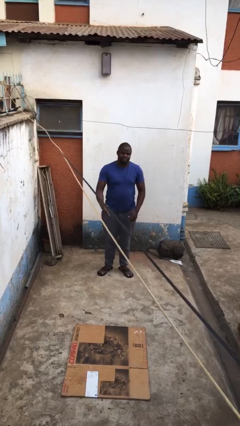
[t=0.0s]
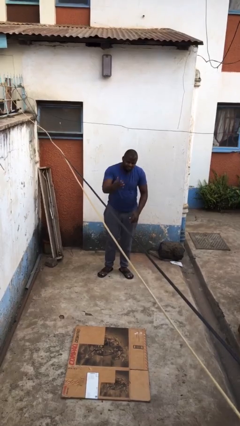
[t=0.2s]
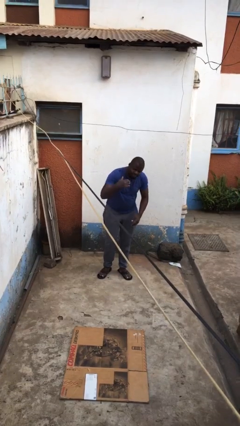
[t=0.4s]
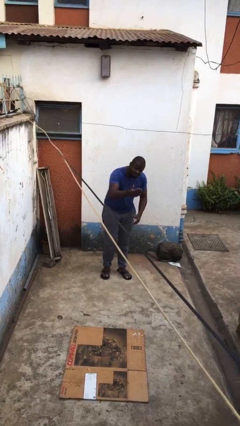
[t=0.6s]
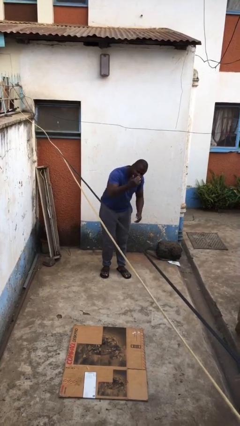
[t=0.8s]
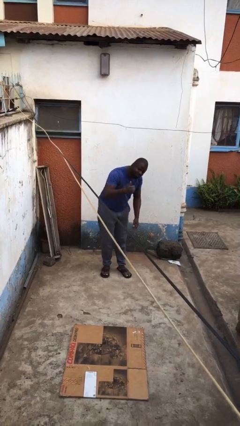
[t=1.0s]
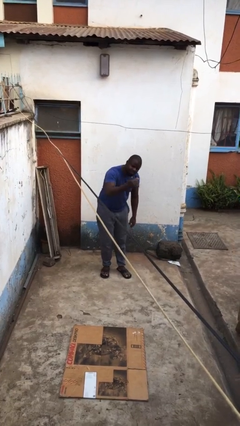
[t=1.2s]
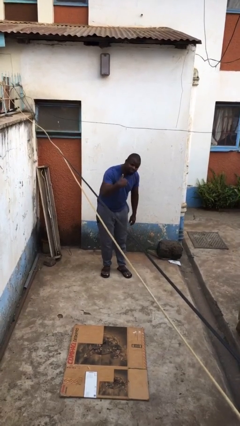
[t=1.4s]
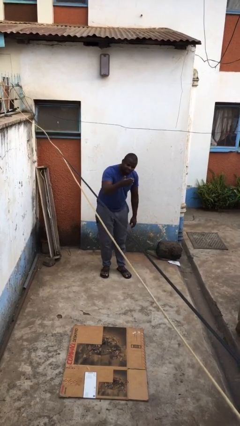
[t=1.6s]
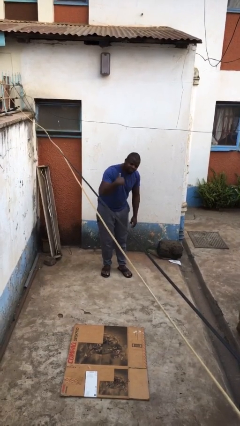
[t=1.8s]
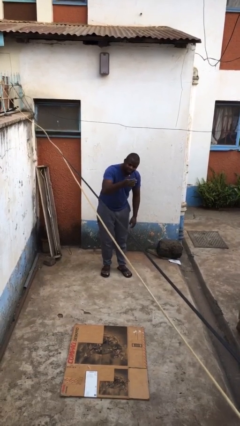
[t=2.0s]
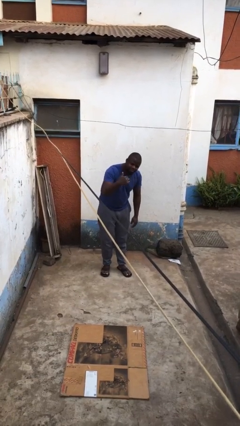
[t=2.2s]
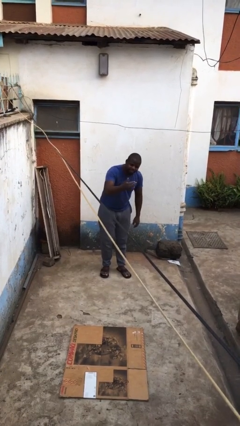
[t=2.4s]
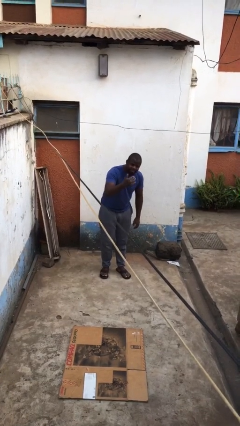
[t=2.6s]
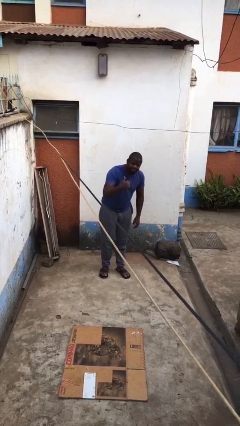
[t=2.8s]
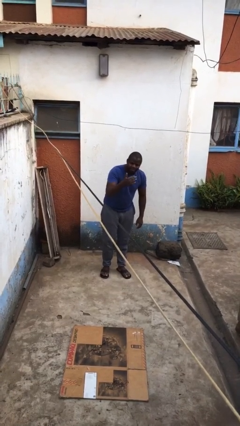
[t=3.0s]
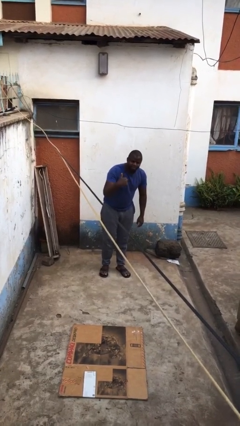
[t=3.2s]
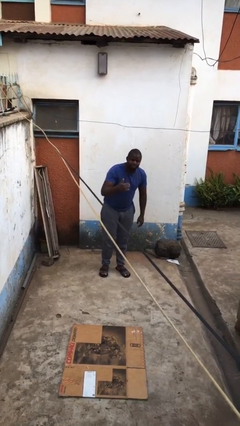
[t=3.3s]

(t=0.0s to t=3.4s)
person gestures come here

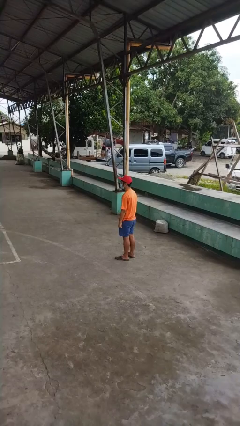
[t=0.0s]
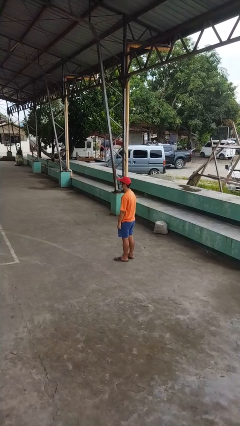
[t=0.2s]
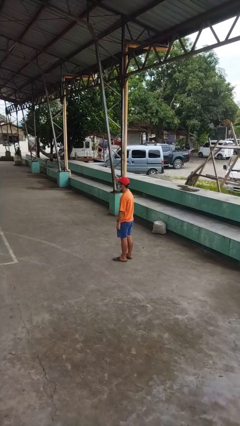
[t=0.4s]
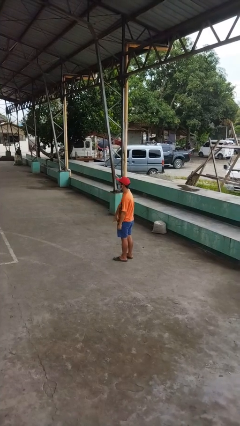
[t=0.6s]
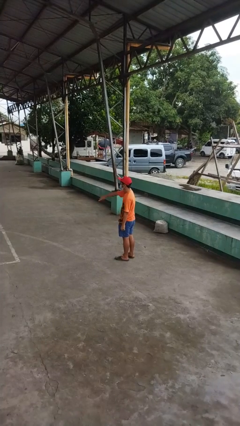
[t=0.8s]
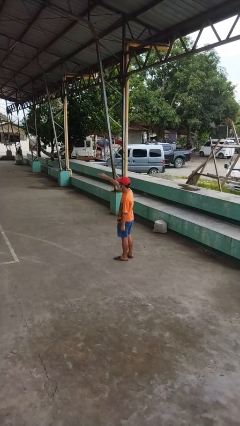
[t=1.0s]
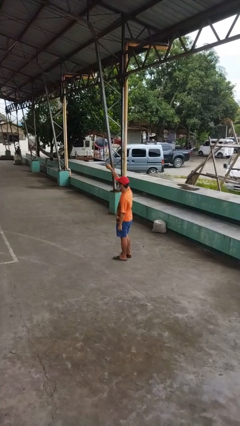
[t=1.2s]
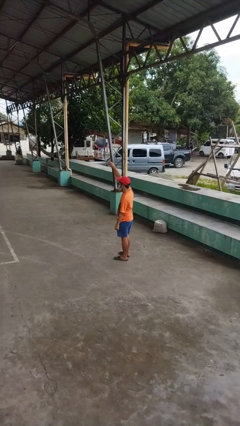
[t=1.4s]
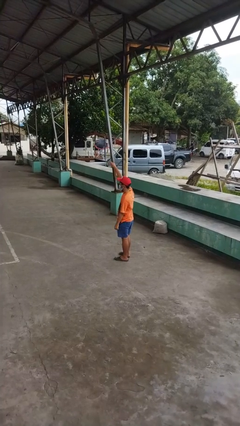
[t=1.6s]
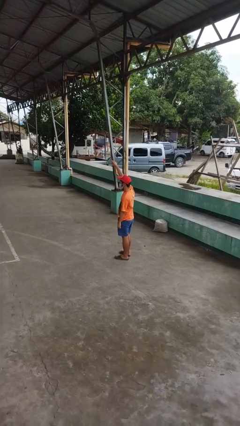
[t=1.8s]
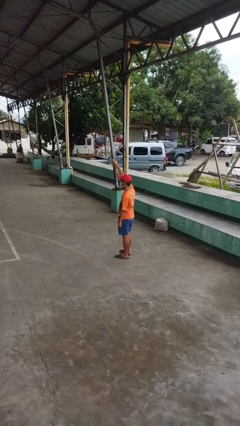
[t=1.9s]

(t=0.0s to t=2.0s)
person gestures swipe up

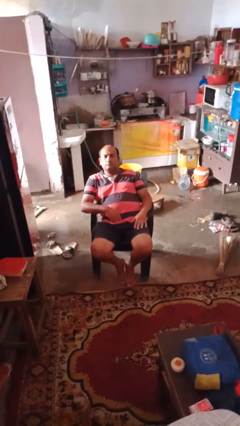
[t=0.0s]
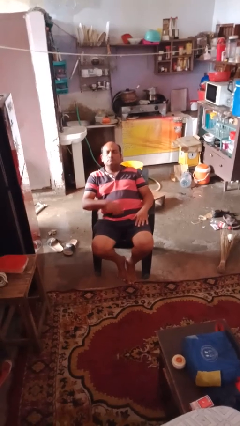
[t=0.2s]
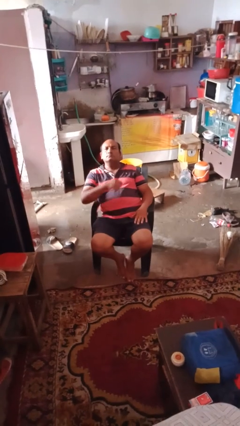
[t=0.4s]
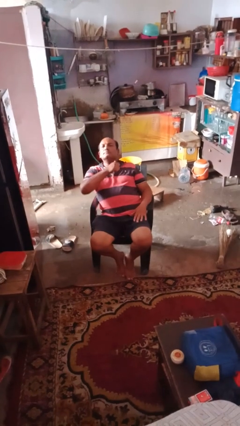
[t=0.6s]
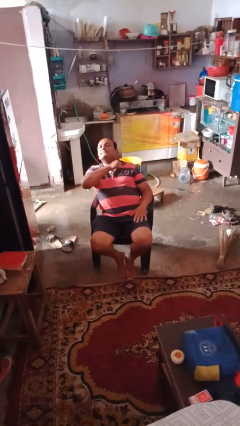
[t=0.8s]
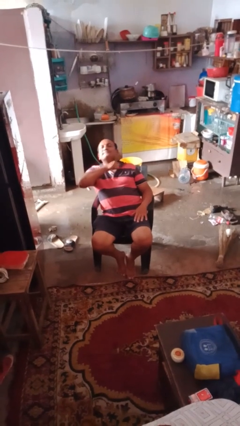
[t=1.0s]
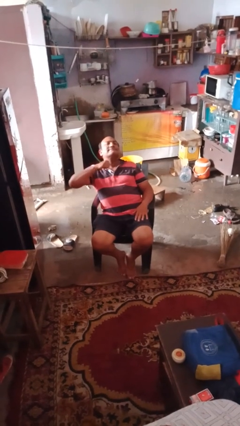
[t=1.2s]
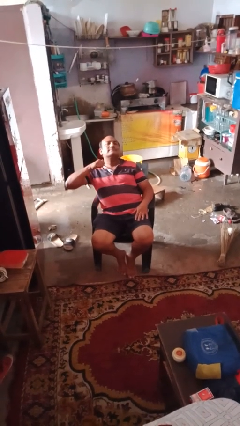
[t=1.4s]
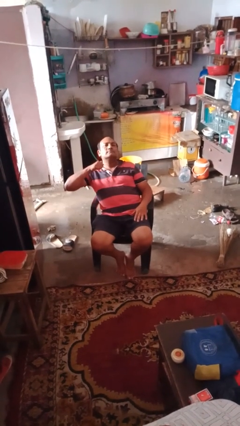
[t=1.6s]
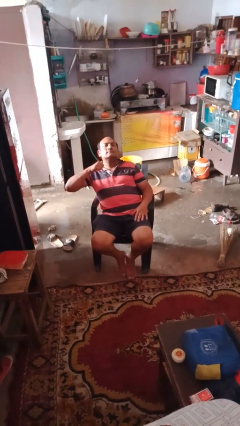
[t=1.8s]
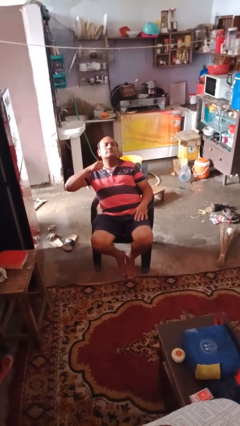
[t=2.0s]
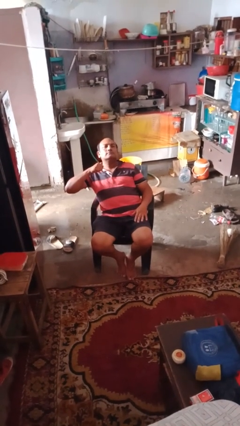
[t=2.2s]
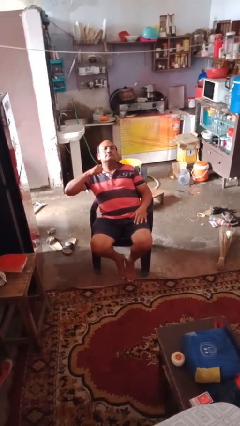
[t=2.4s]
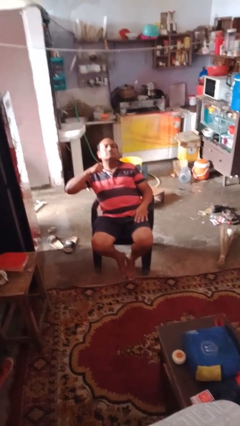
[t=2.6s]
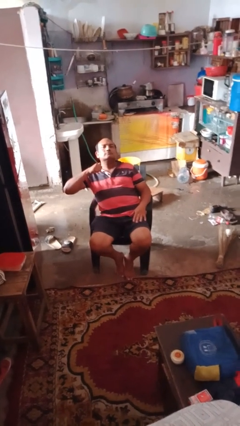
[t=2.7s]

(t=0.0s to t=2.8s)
person gestures cut

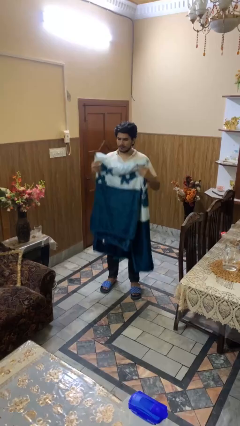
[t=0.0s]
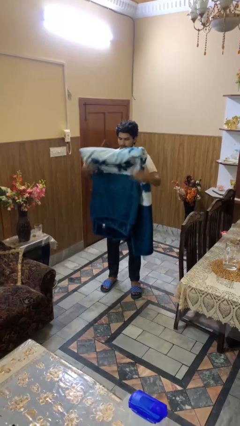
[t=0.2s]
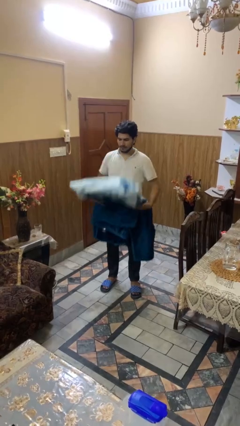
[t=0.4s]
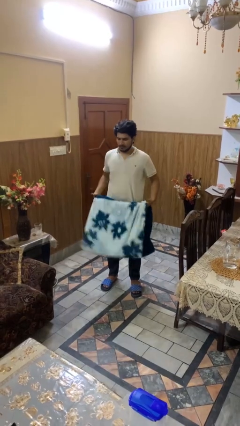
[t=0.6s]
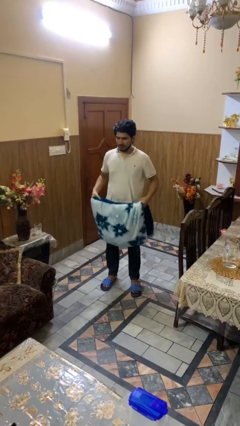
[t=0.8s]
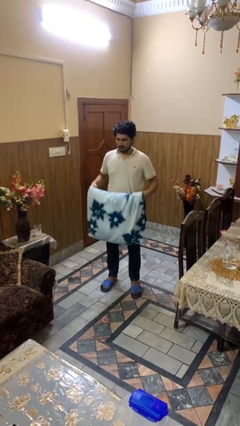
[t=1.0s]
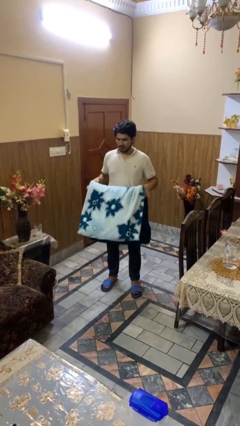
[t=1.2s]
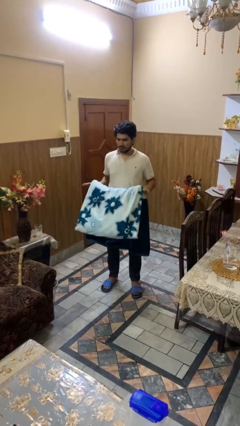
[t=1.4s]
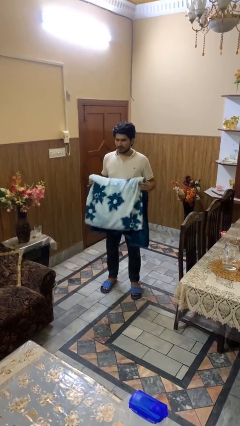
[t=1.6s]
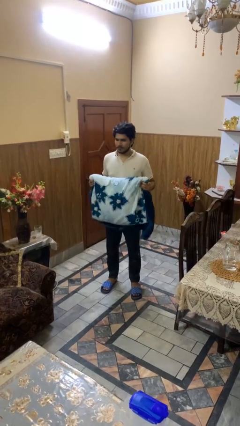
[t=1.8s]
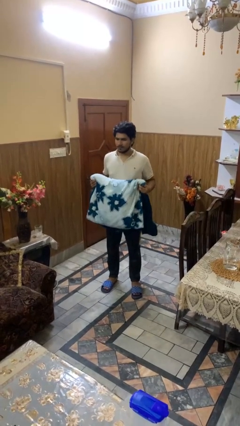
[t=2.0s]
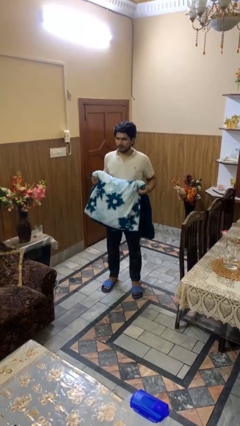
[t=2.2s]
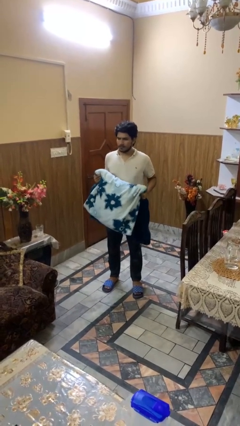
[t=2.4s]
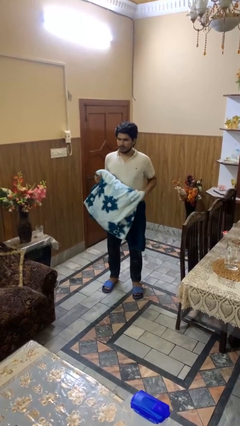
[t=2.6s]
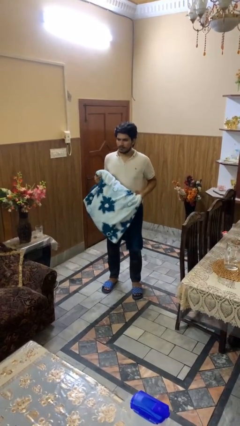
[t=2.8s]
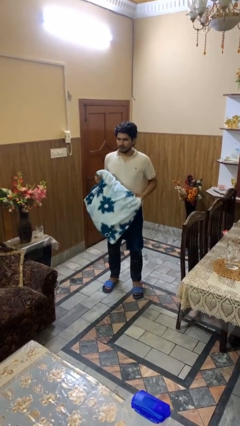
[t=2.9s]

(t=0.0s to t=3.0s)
person folds blanket

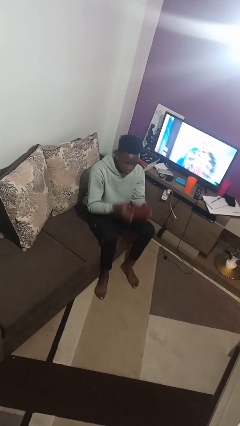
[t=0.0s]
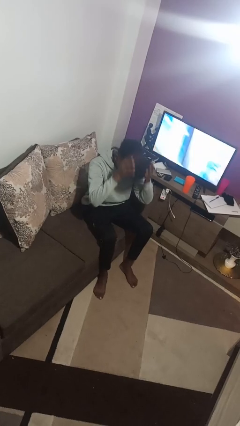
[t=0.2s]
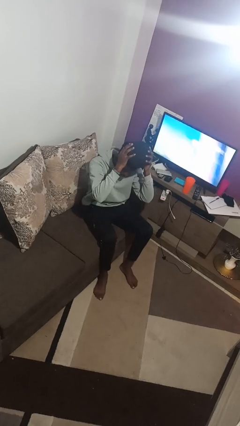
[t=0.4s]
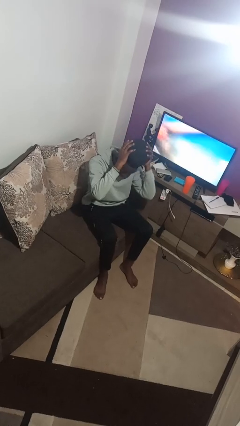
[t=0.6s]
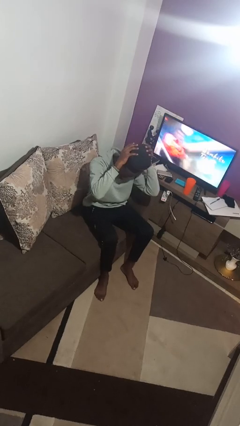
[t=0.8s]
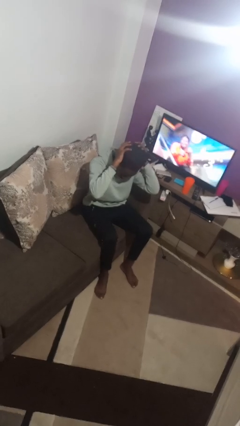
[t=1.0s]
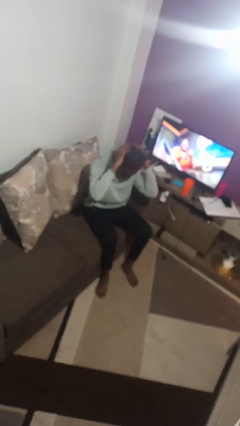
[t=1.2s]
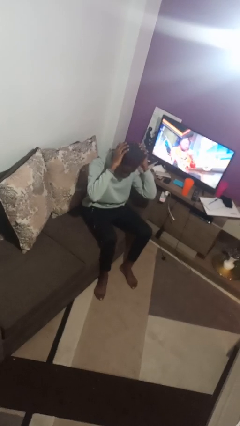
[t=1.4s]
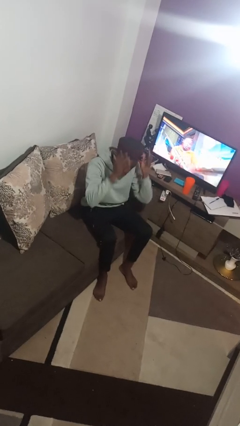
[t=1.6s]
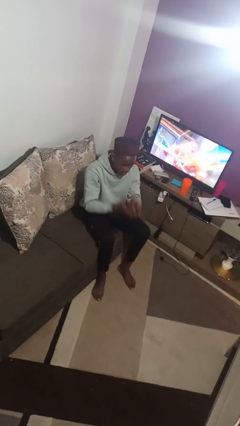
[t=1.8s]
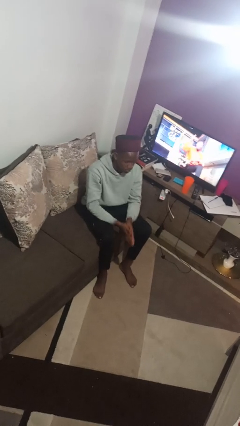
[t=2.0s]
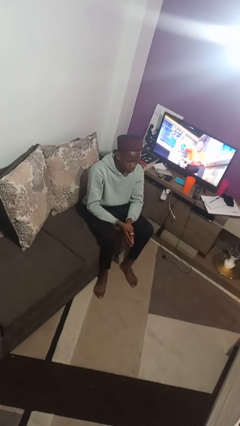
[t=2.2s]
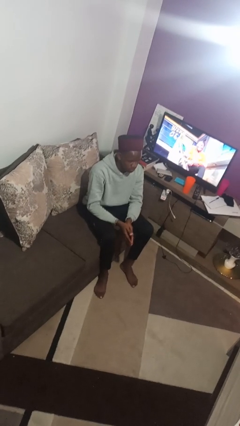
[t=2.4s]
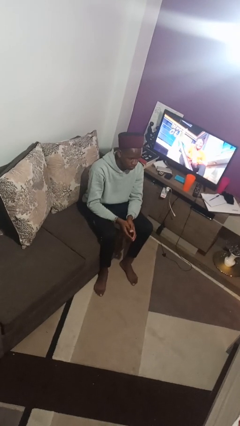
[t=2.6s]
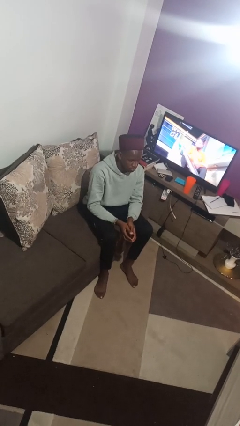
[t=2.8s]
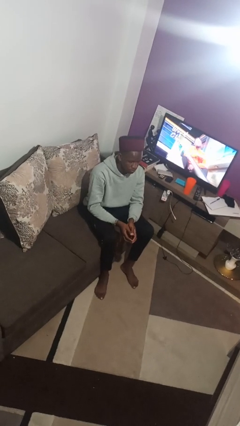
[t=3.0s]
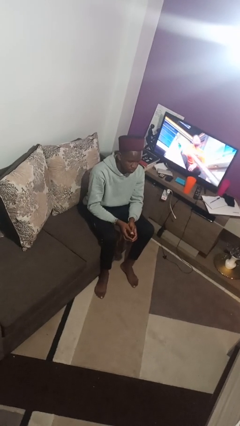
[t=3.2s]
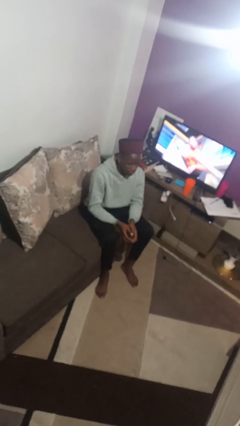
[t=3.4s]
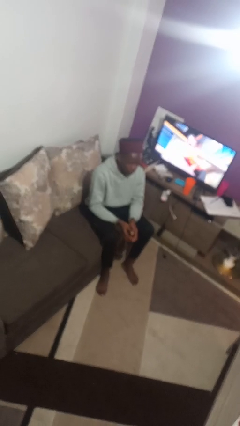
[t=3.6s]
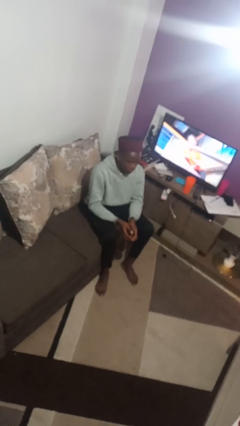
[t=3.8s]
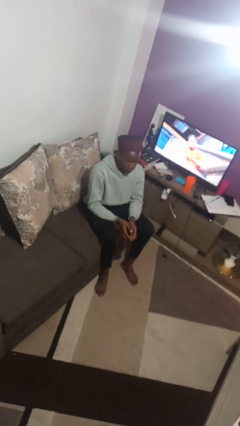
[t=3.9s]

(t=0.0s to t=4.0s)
person puts on hat

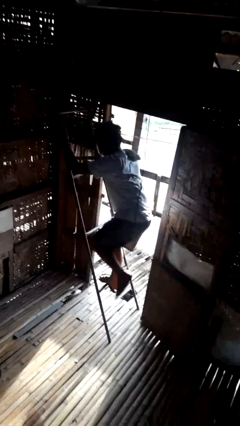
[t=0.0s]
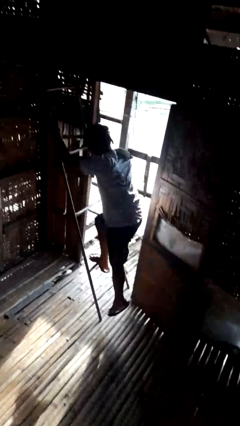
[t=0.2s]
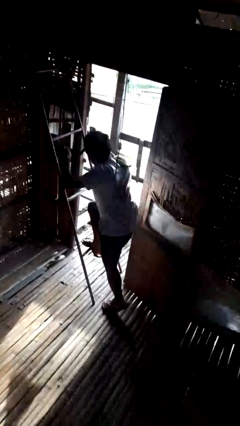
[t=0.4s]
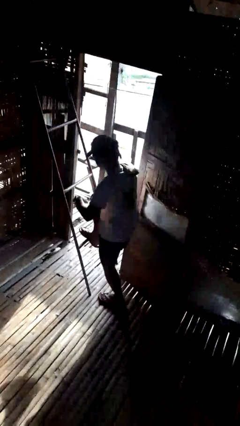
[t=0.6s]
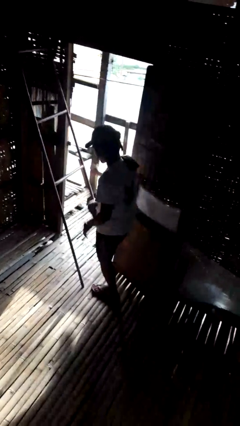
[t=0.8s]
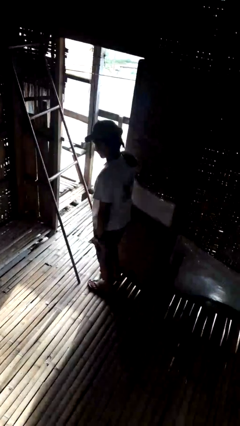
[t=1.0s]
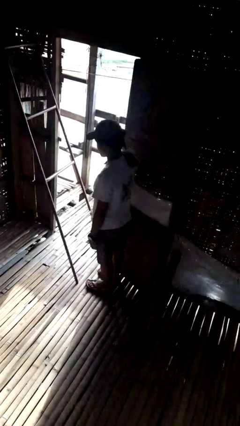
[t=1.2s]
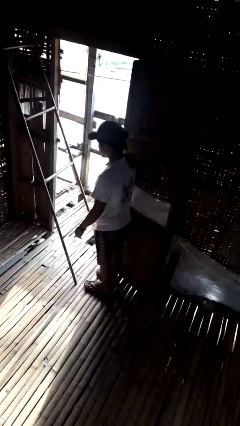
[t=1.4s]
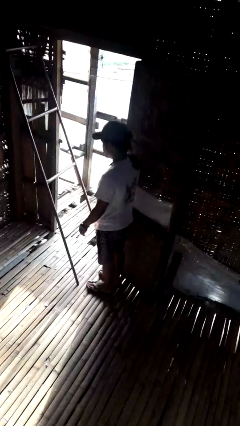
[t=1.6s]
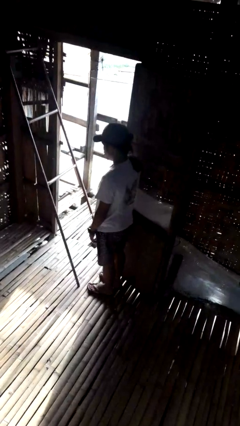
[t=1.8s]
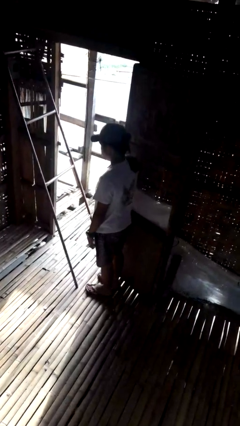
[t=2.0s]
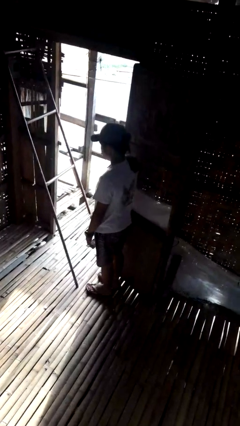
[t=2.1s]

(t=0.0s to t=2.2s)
person climbs down ladder
